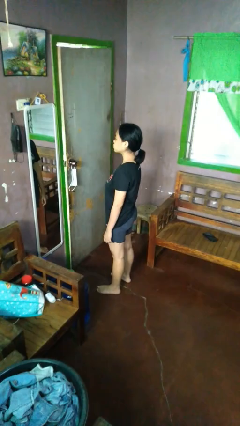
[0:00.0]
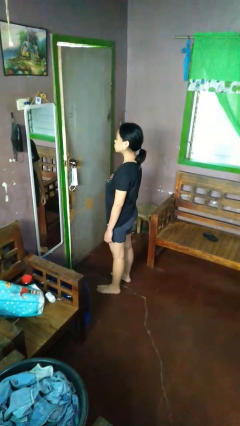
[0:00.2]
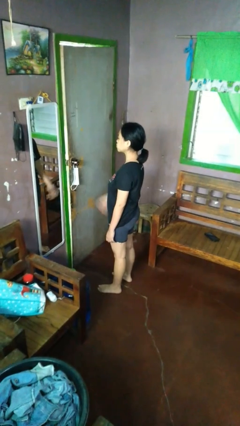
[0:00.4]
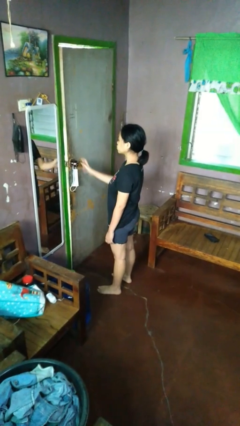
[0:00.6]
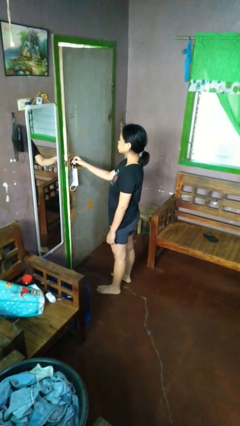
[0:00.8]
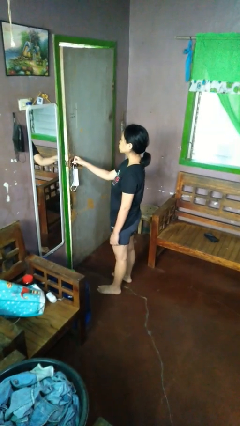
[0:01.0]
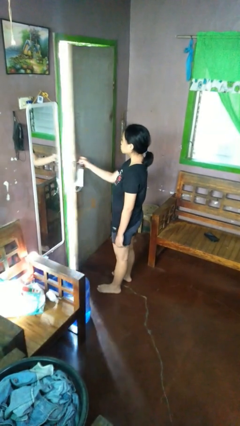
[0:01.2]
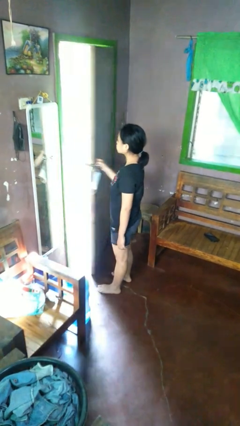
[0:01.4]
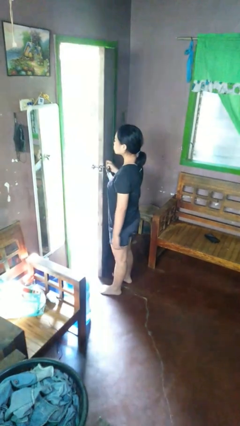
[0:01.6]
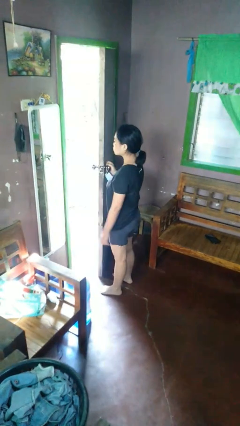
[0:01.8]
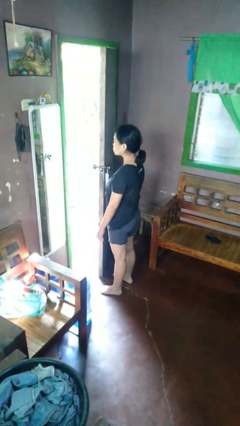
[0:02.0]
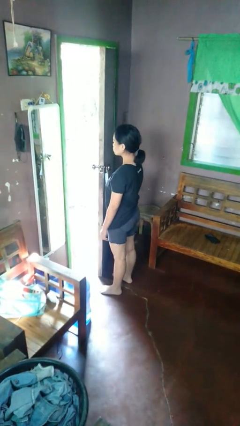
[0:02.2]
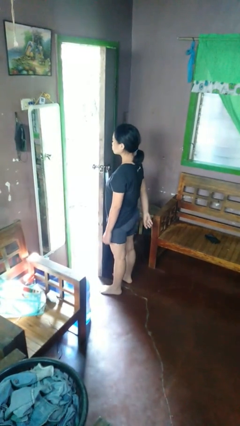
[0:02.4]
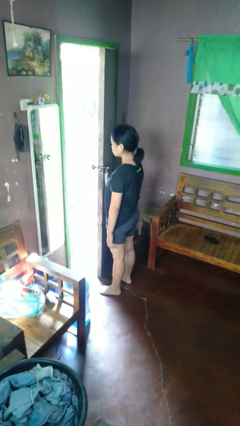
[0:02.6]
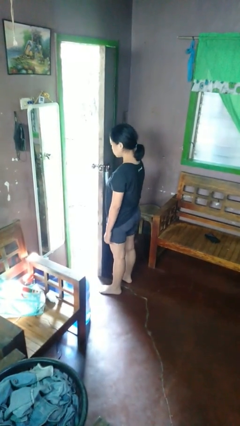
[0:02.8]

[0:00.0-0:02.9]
person opens facility door

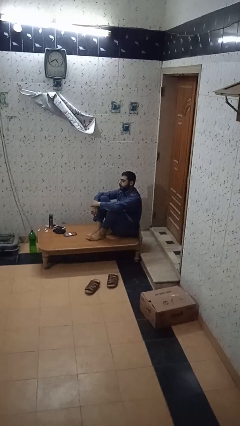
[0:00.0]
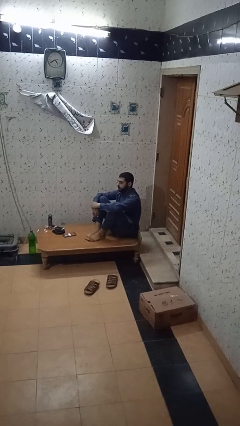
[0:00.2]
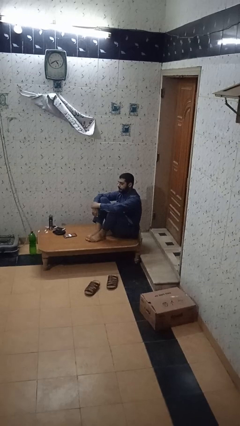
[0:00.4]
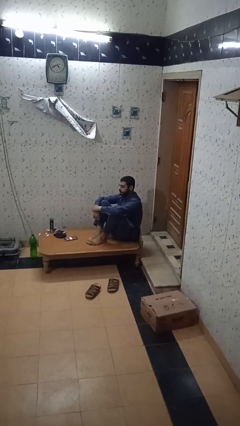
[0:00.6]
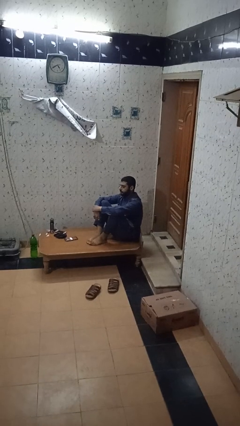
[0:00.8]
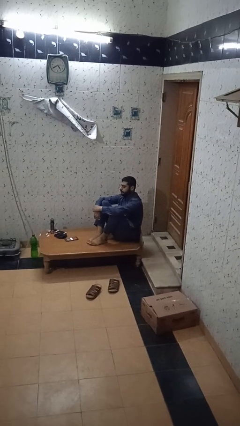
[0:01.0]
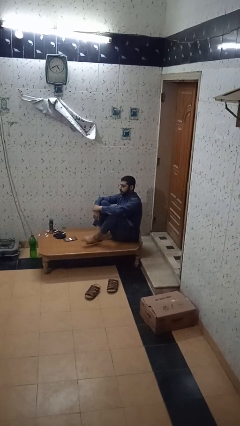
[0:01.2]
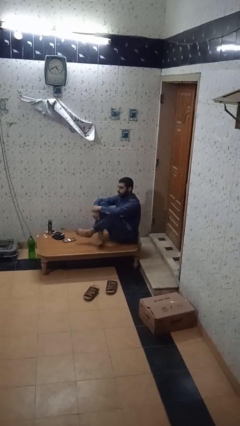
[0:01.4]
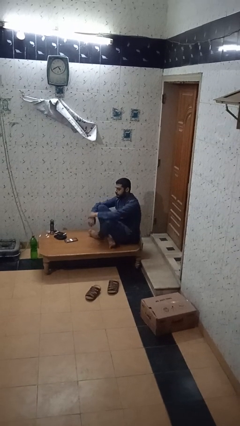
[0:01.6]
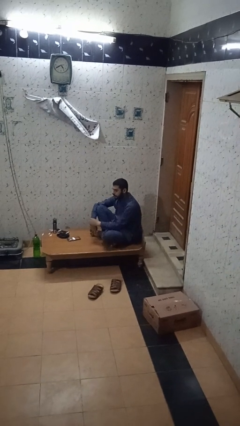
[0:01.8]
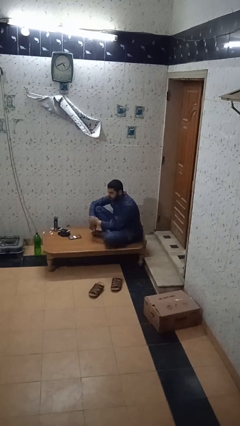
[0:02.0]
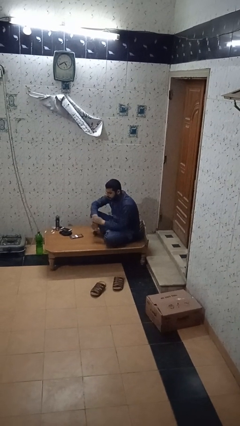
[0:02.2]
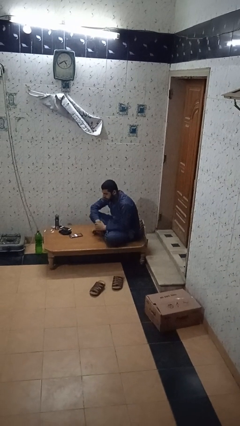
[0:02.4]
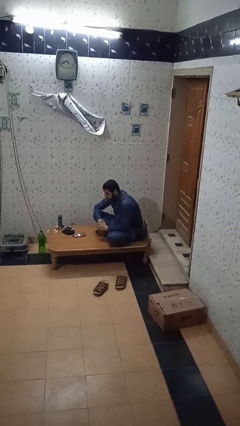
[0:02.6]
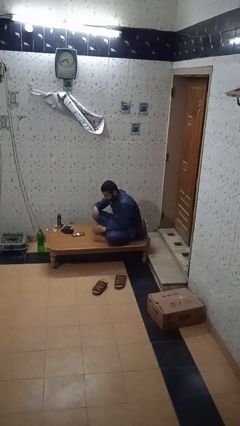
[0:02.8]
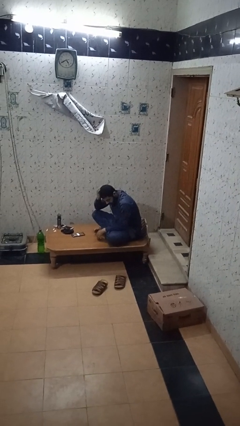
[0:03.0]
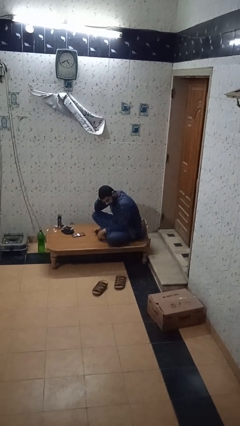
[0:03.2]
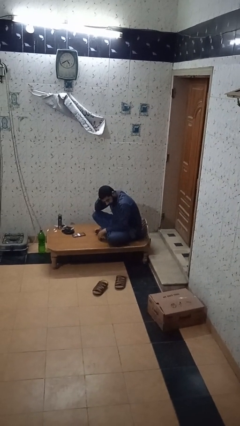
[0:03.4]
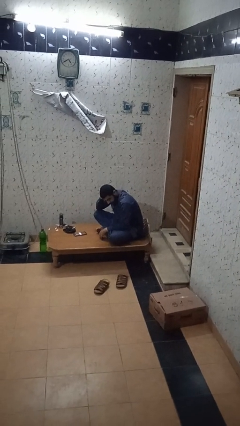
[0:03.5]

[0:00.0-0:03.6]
person crosses legs

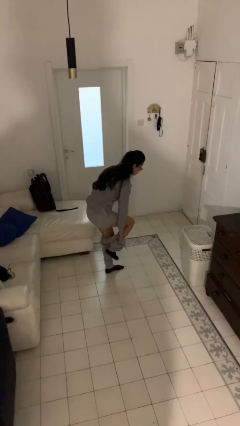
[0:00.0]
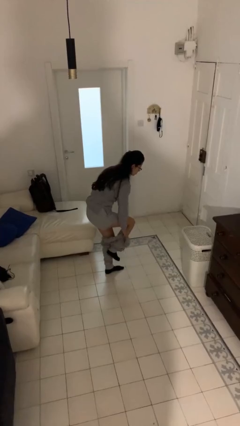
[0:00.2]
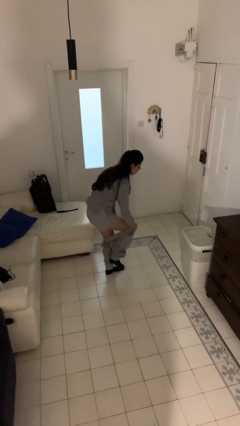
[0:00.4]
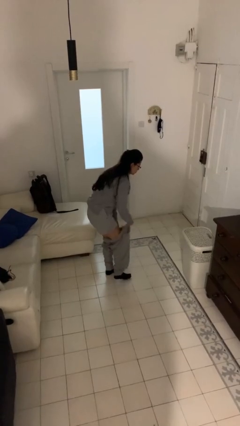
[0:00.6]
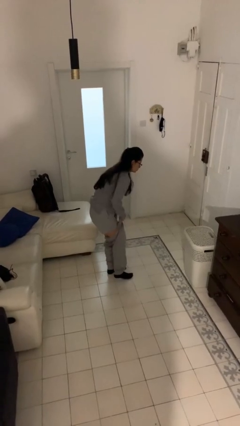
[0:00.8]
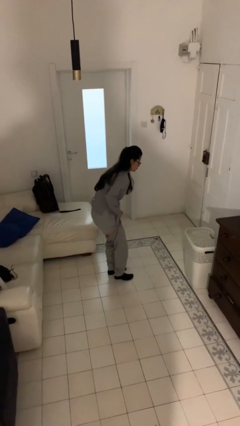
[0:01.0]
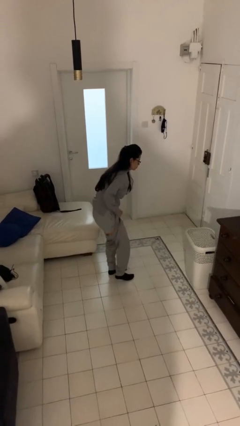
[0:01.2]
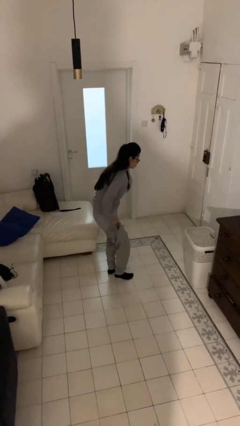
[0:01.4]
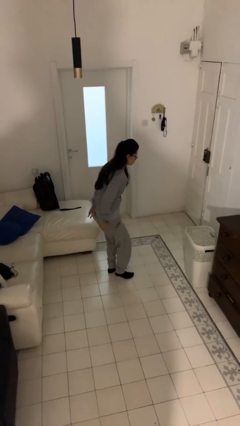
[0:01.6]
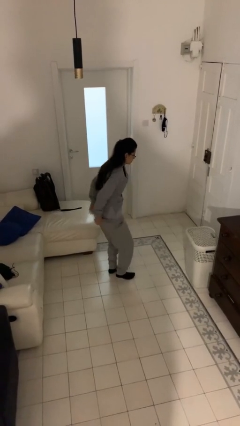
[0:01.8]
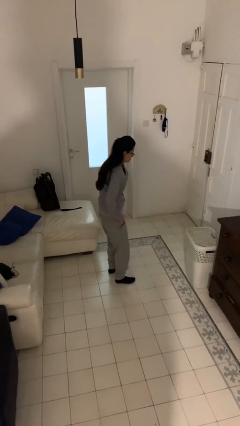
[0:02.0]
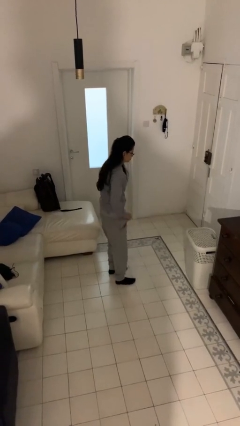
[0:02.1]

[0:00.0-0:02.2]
person puts on pants

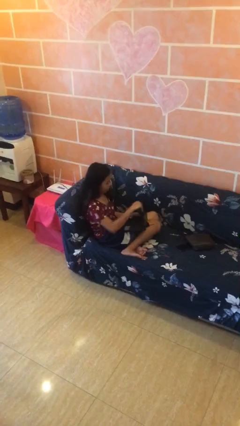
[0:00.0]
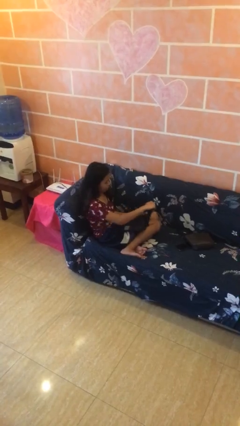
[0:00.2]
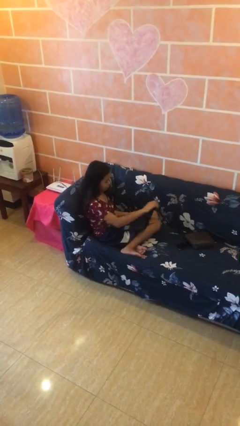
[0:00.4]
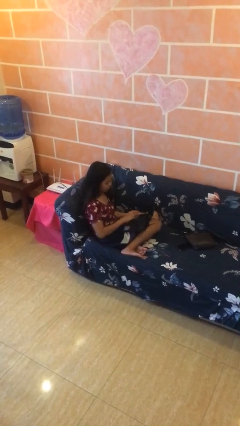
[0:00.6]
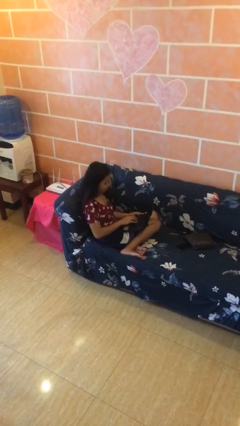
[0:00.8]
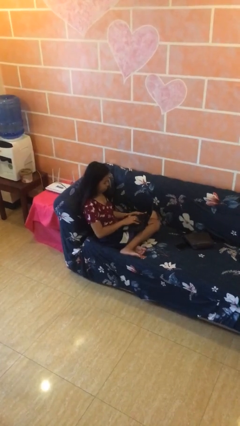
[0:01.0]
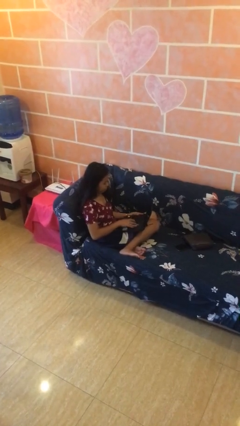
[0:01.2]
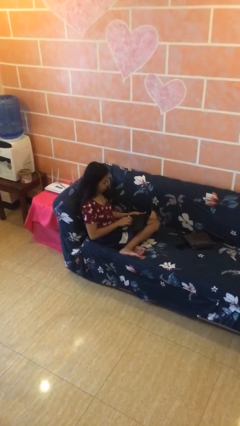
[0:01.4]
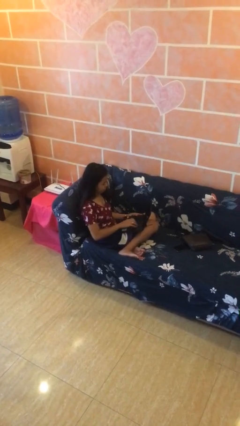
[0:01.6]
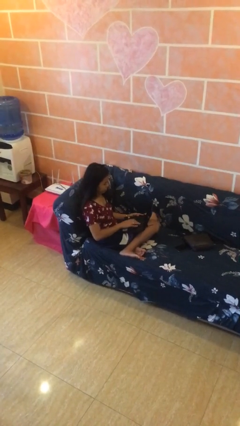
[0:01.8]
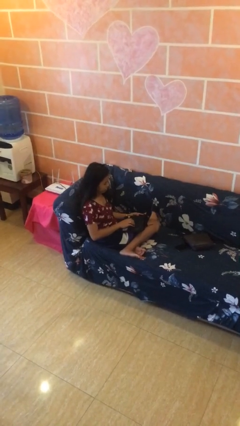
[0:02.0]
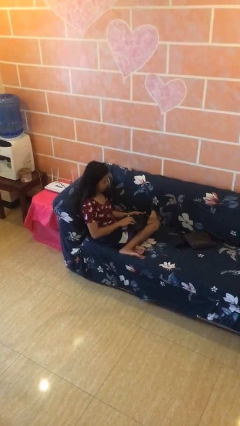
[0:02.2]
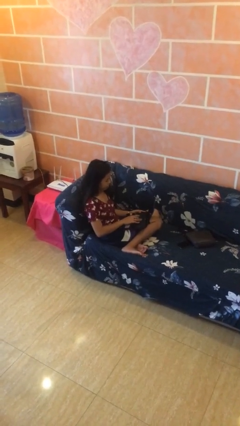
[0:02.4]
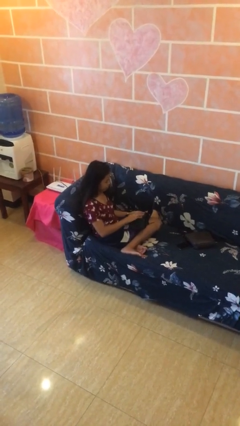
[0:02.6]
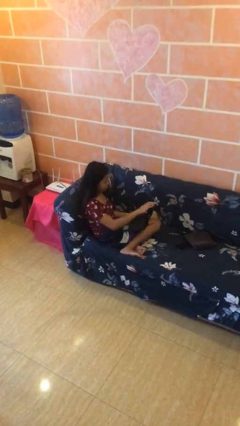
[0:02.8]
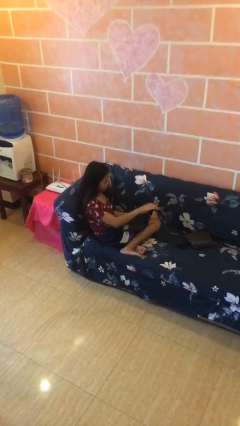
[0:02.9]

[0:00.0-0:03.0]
person interacts with laptop

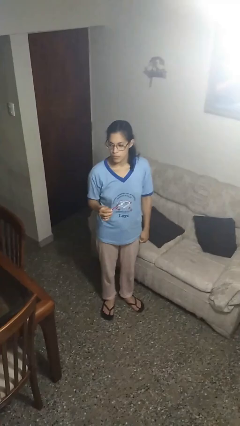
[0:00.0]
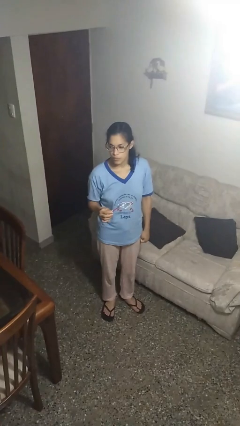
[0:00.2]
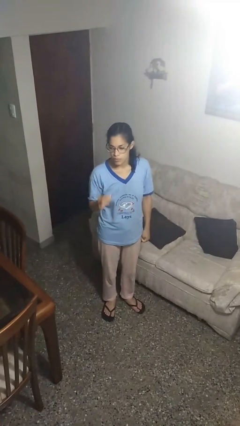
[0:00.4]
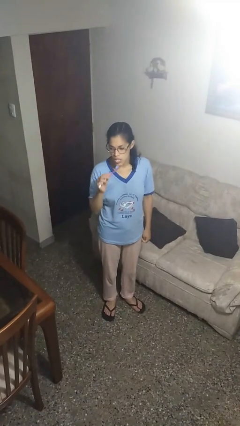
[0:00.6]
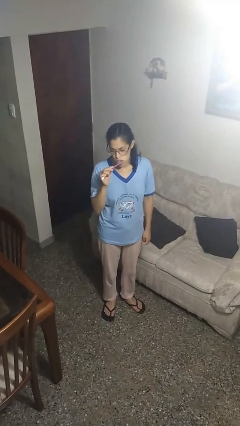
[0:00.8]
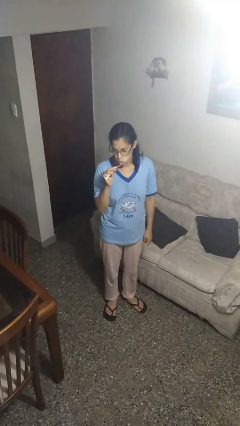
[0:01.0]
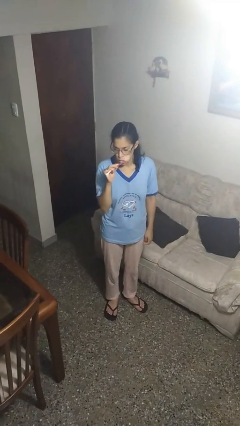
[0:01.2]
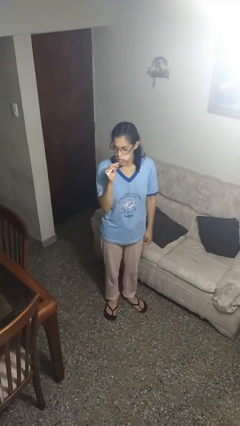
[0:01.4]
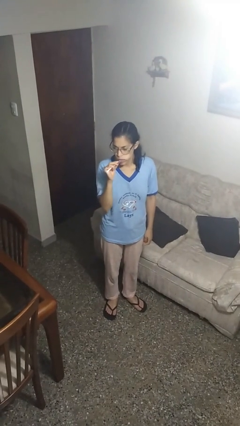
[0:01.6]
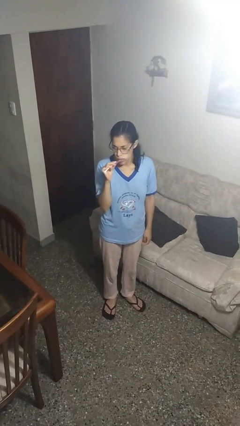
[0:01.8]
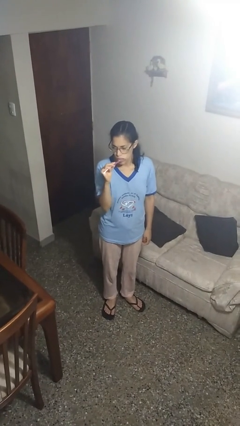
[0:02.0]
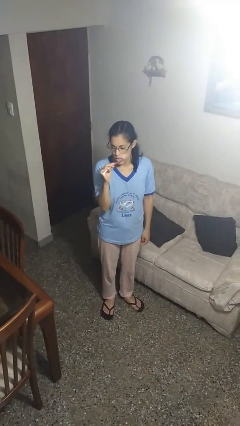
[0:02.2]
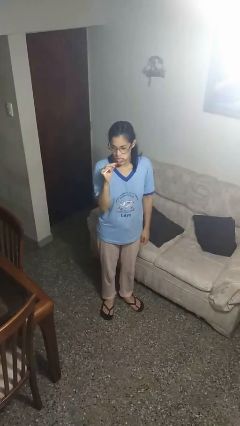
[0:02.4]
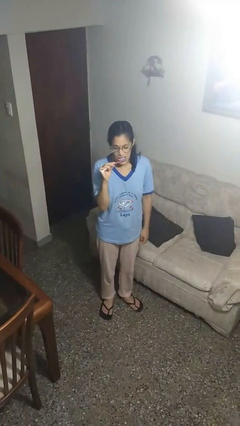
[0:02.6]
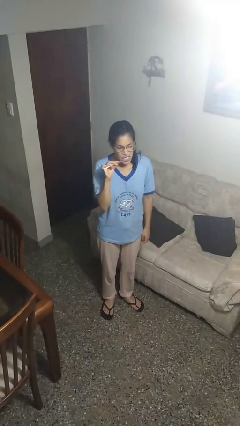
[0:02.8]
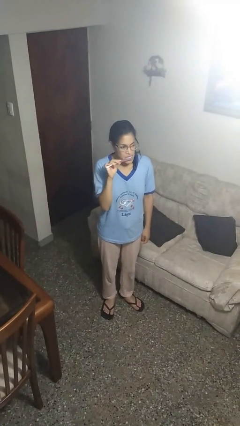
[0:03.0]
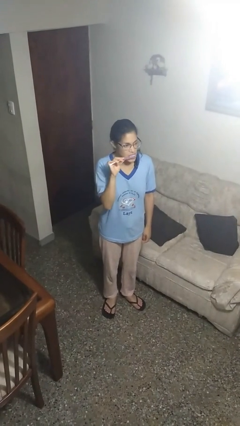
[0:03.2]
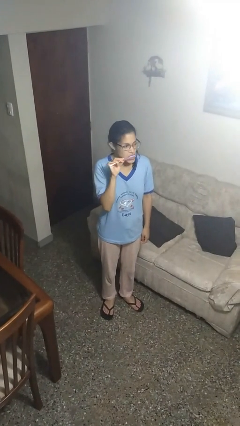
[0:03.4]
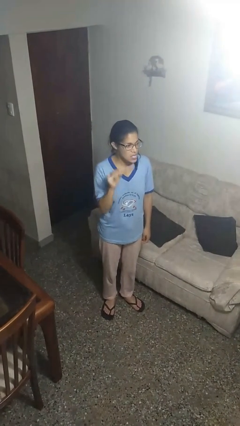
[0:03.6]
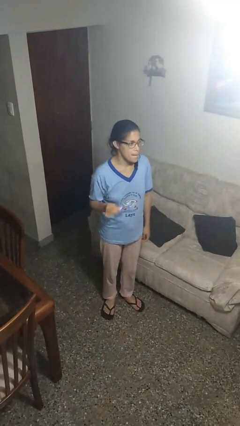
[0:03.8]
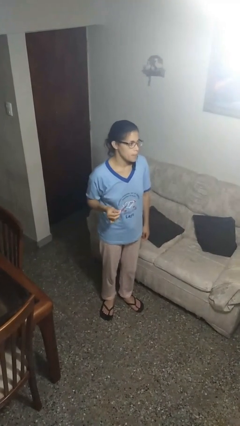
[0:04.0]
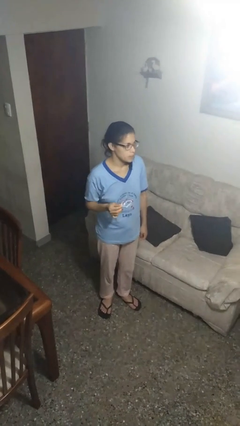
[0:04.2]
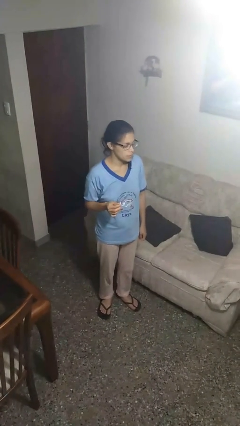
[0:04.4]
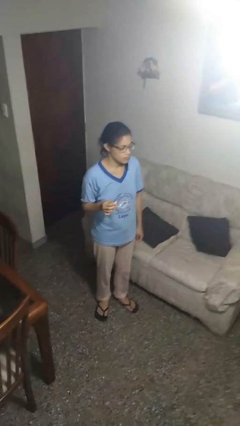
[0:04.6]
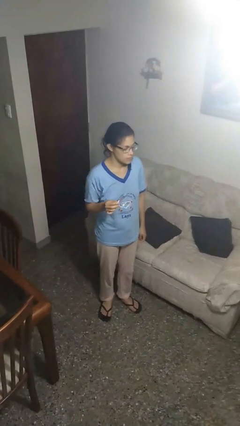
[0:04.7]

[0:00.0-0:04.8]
person brushes teeth

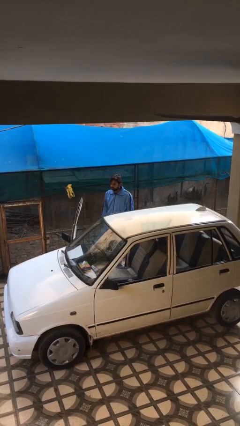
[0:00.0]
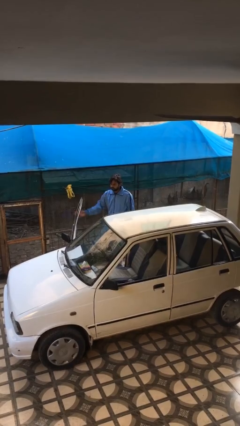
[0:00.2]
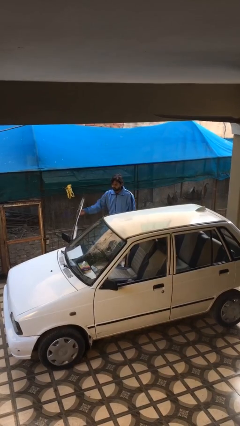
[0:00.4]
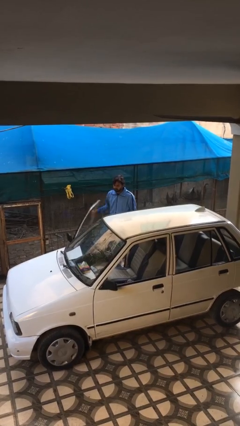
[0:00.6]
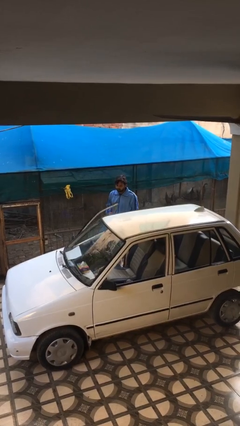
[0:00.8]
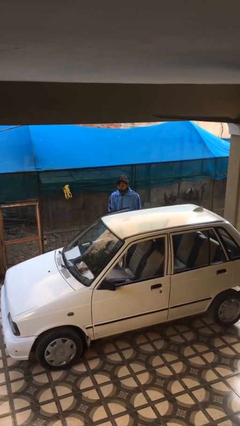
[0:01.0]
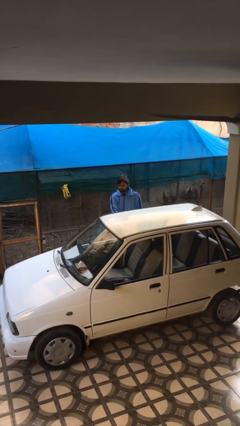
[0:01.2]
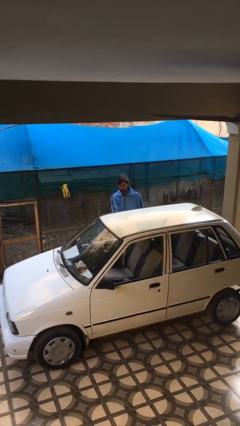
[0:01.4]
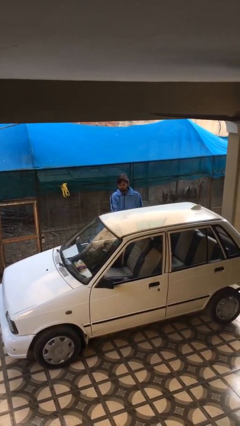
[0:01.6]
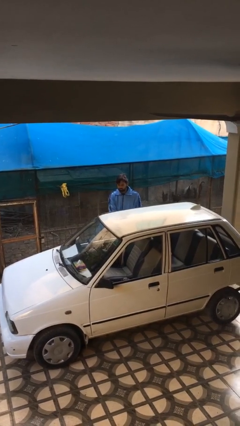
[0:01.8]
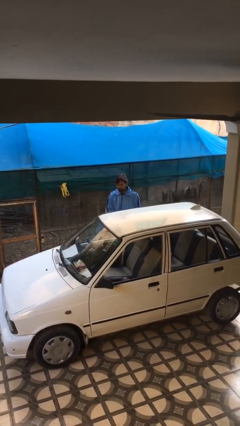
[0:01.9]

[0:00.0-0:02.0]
person closes car door
